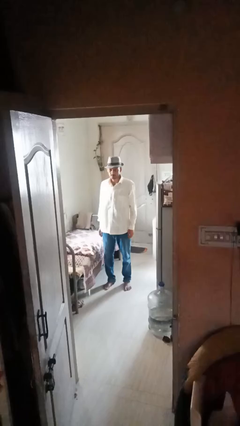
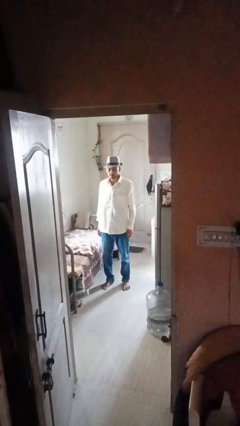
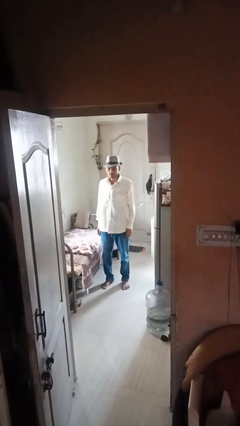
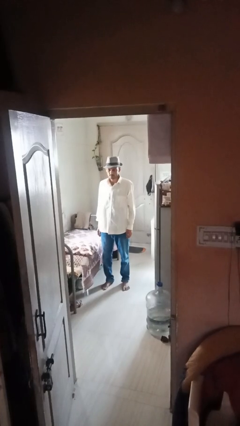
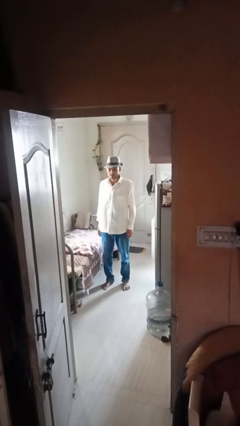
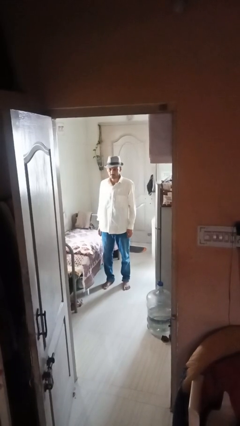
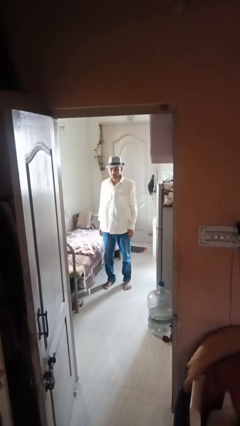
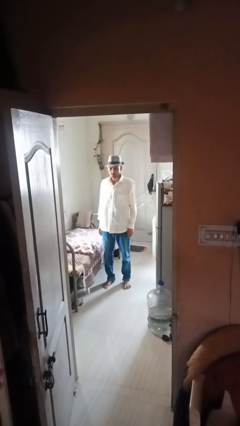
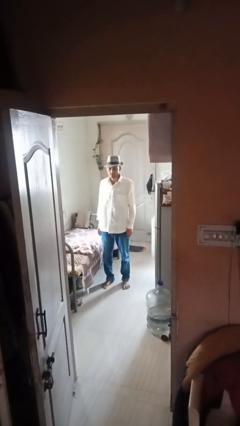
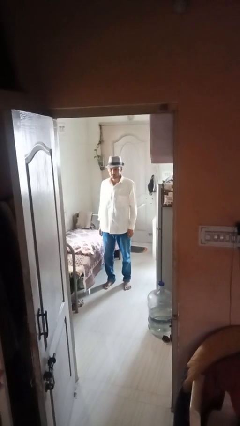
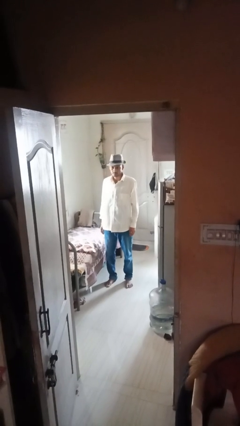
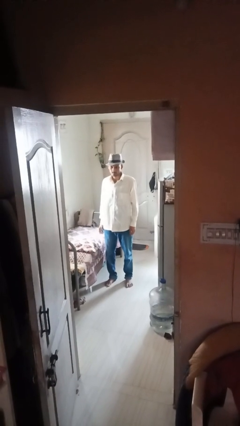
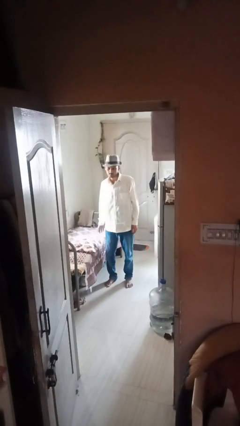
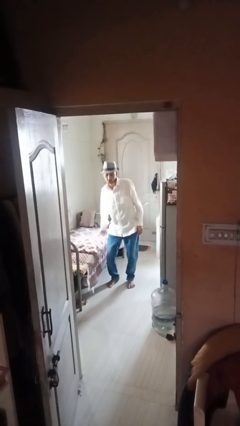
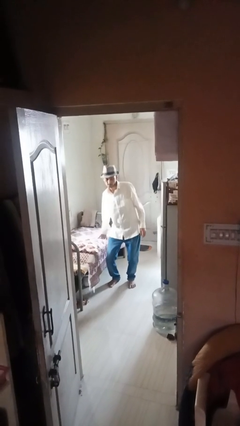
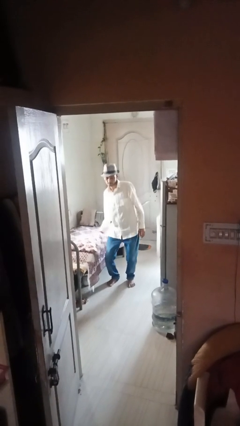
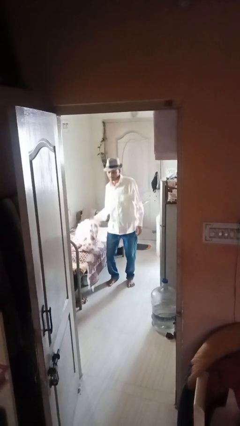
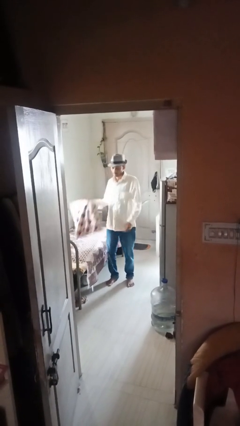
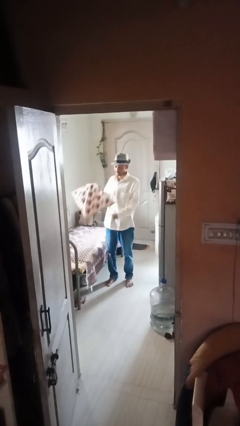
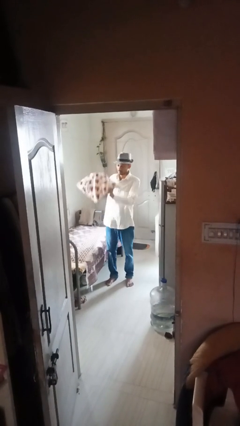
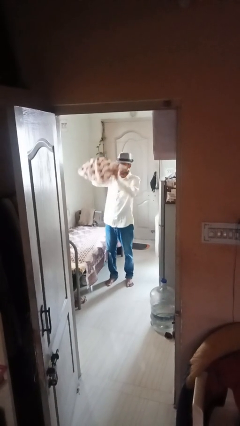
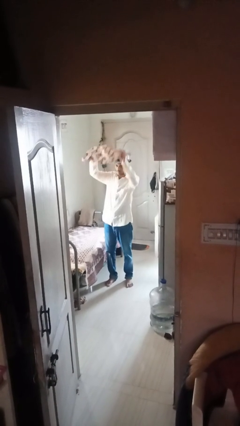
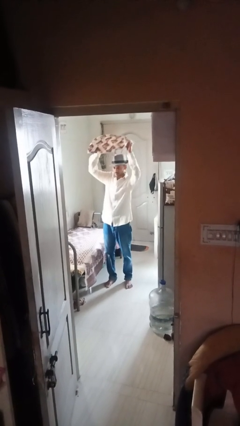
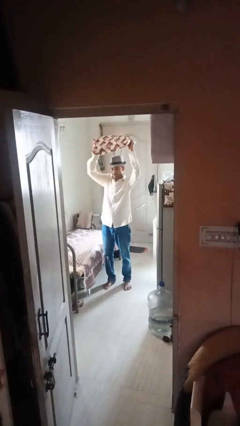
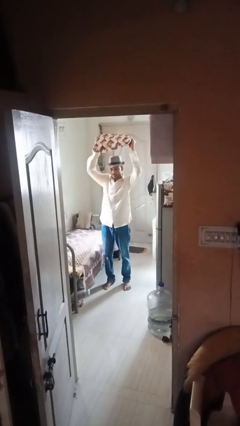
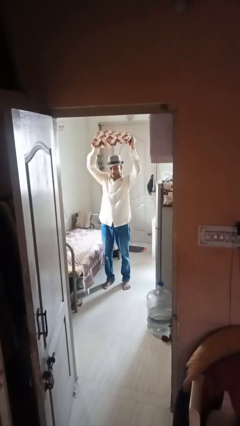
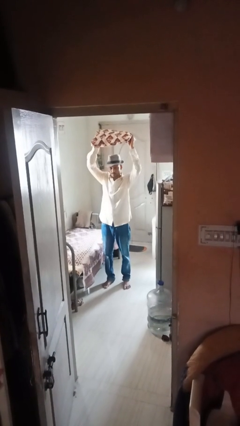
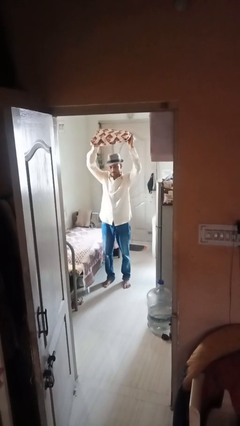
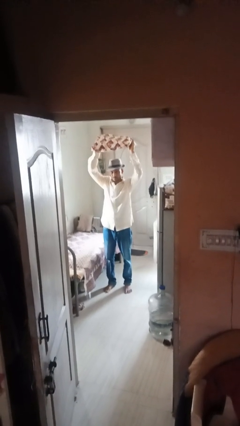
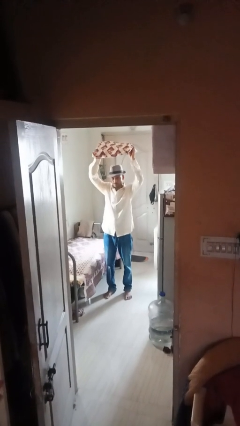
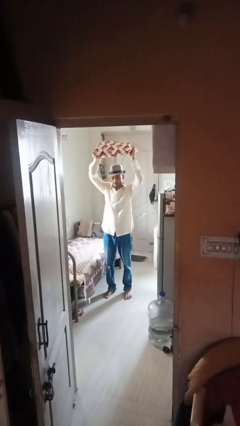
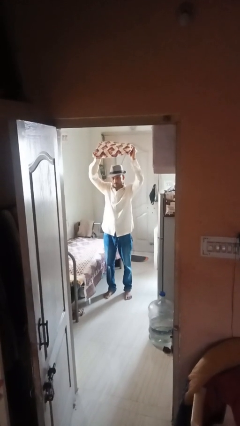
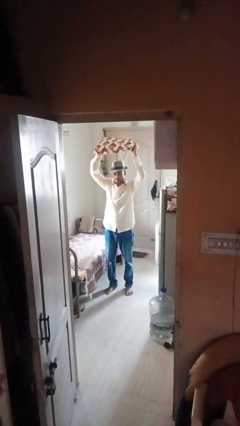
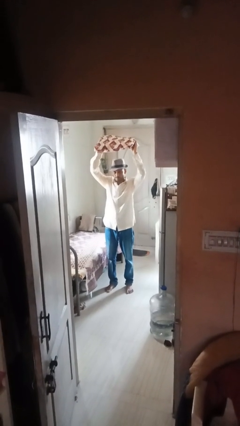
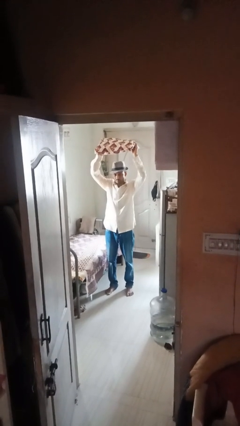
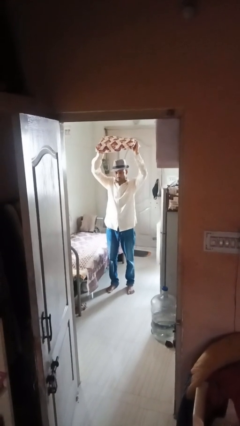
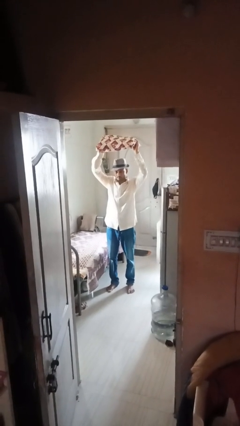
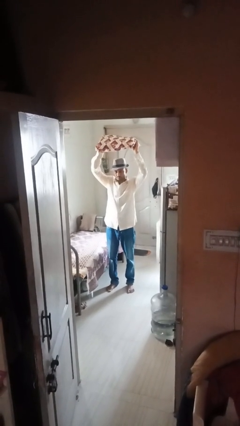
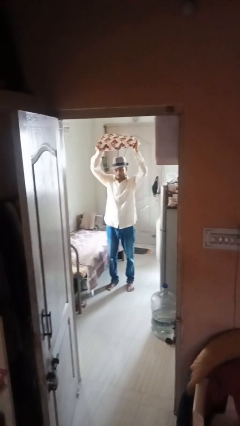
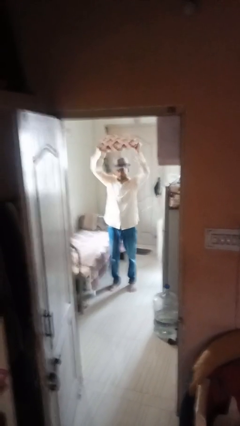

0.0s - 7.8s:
person holds object above head

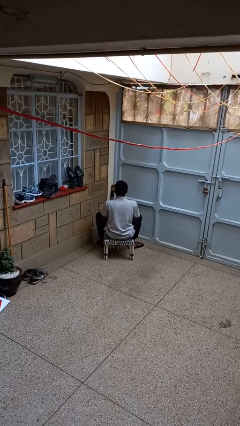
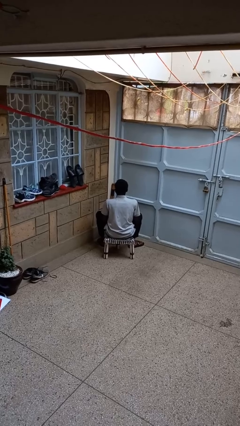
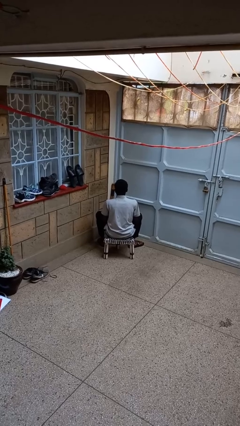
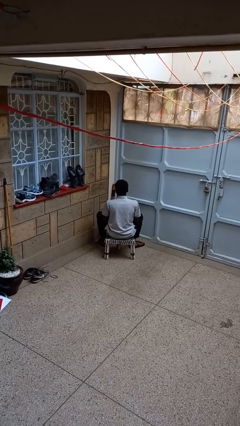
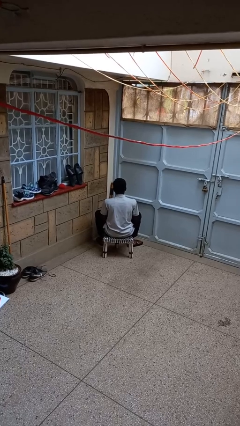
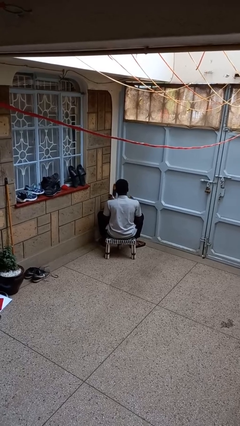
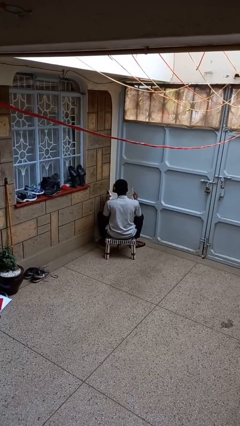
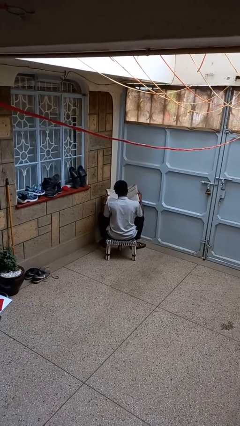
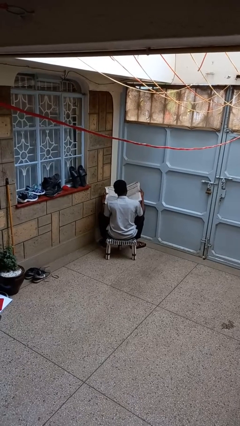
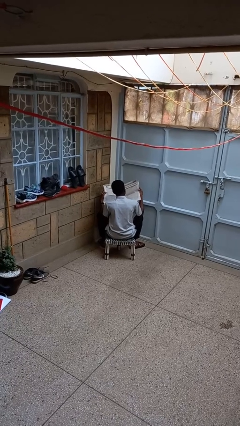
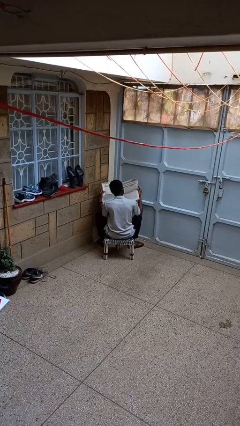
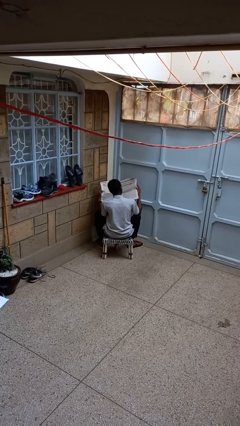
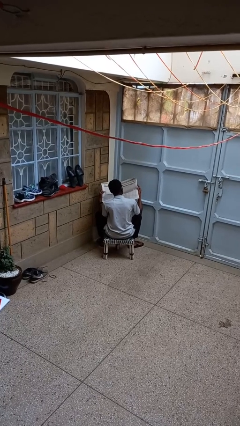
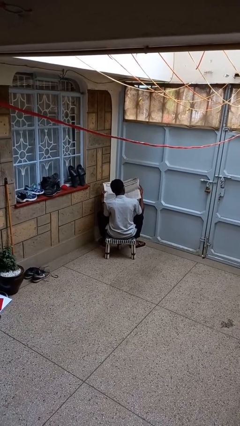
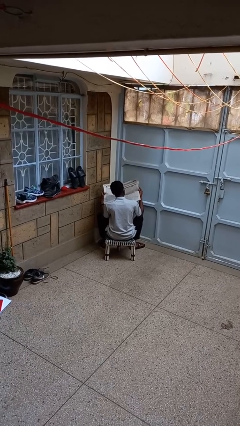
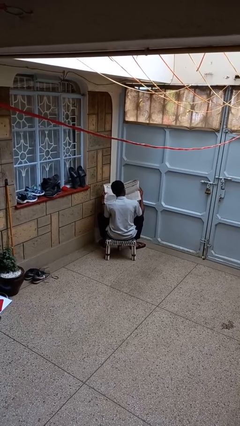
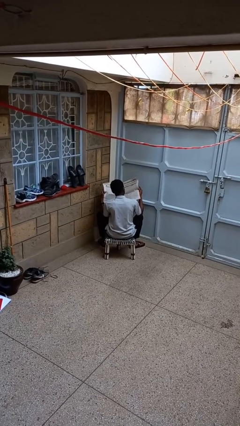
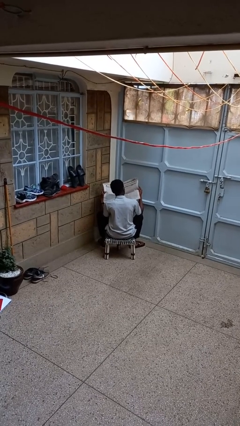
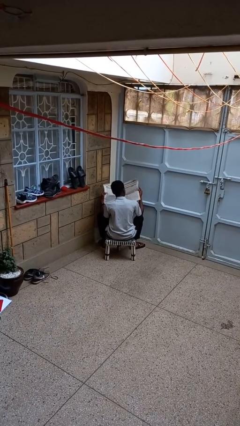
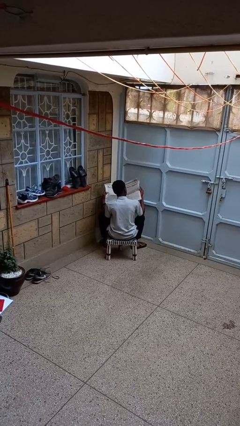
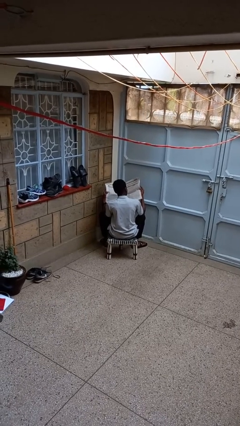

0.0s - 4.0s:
person reads newspaper

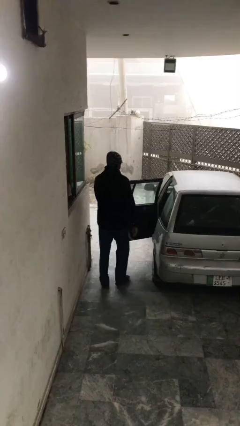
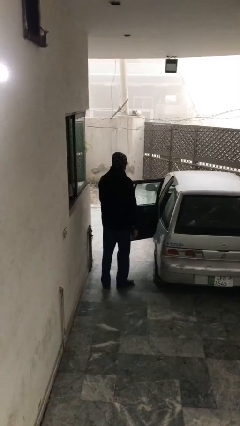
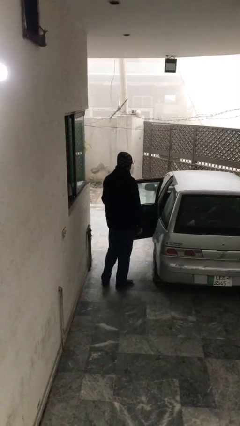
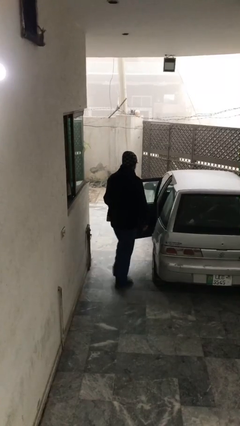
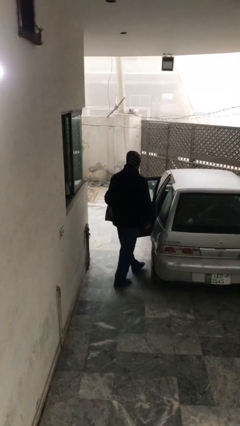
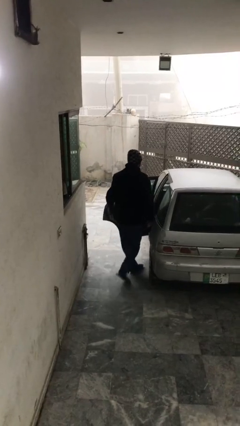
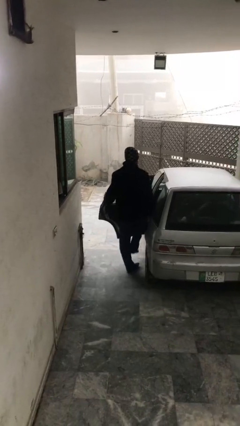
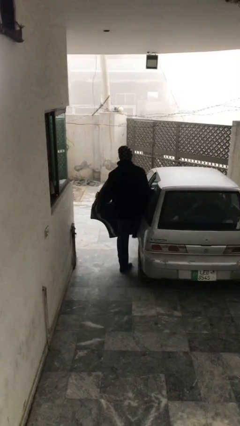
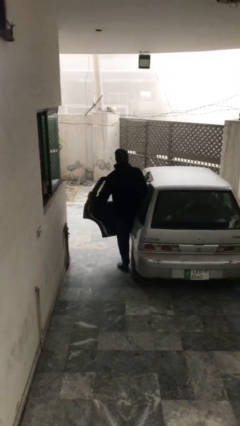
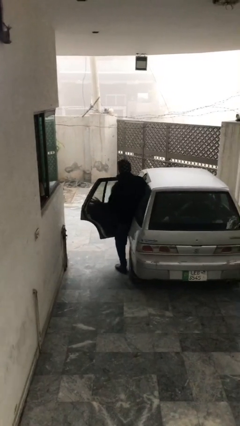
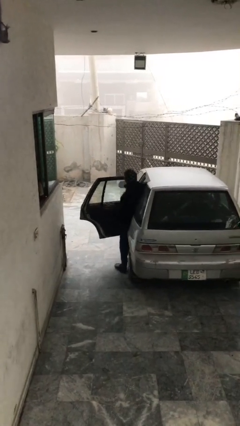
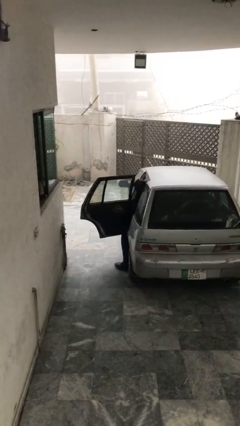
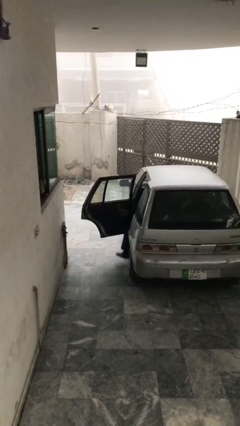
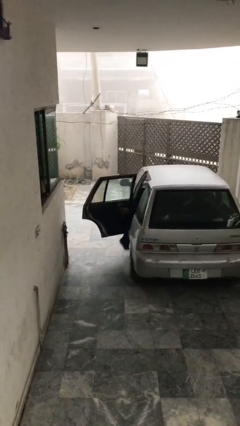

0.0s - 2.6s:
person enters car

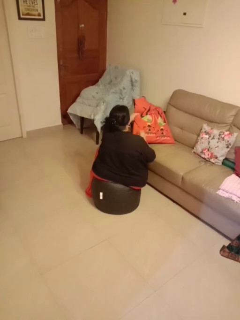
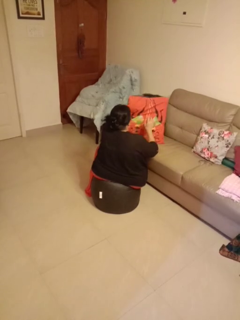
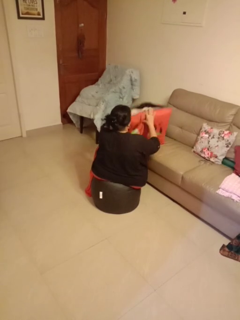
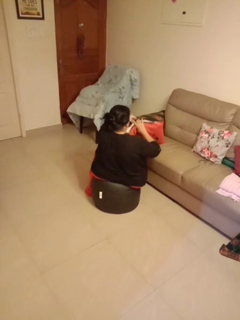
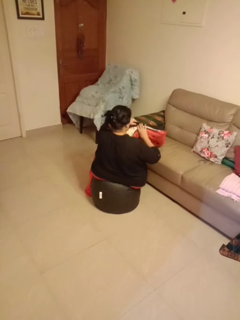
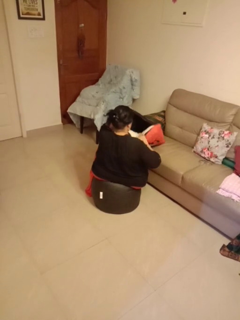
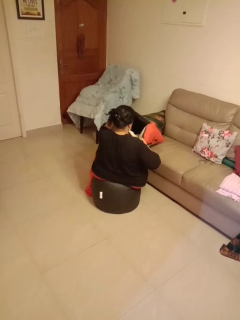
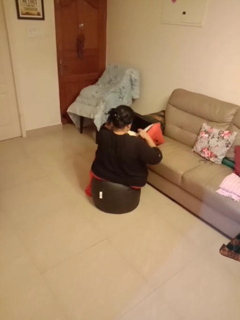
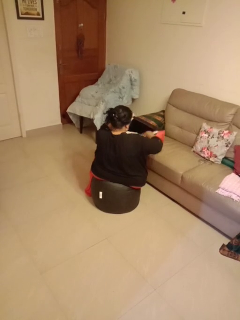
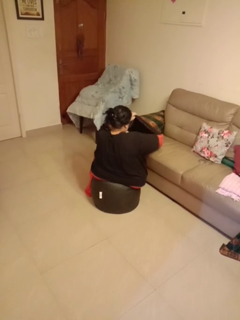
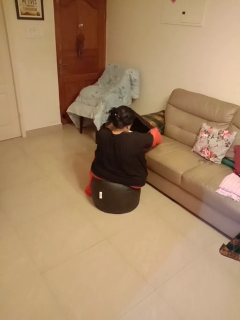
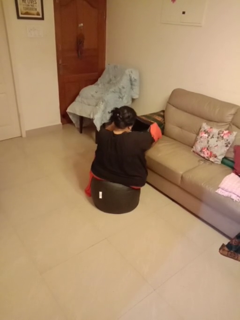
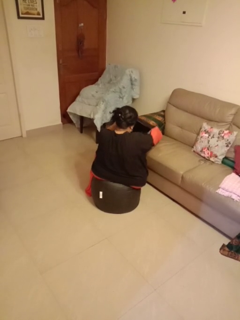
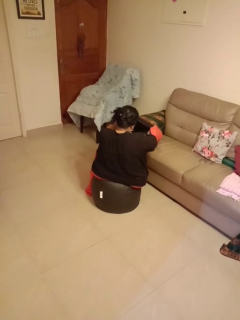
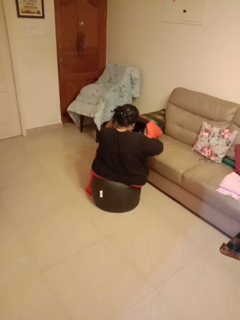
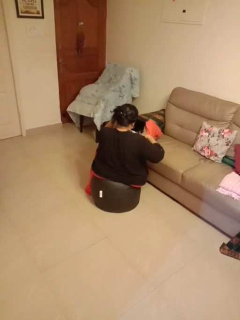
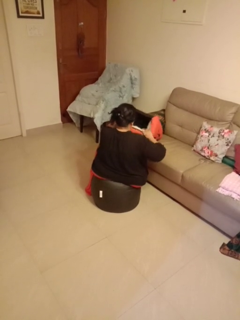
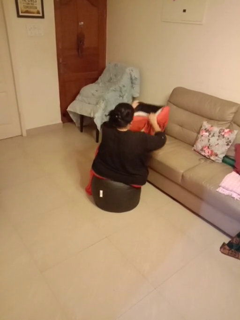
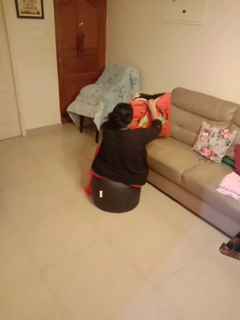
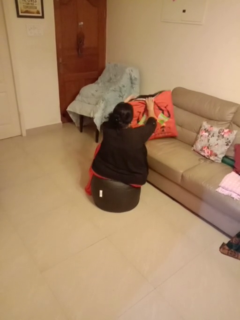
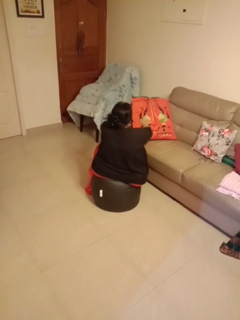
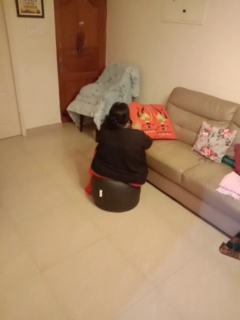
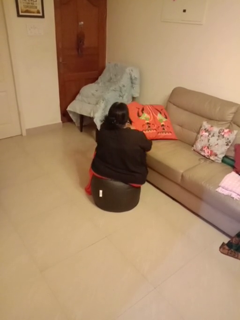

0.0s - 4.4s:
person searches in couch
